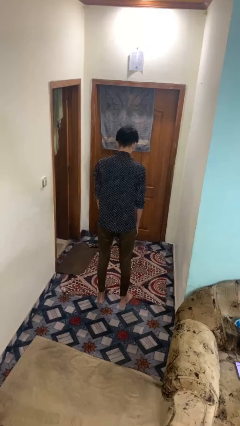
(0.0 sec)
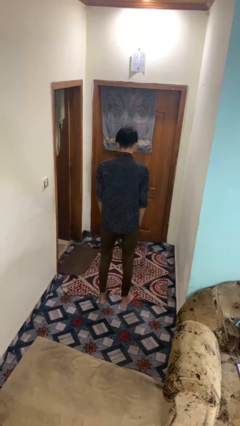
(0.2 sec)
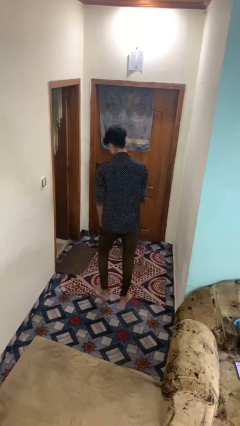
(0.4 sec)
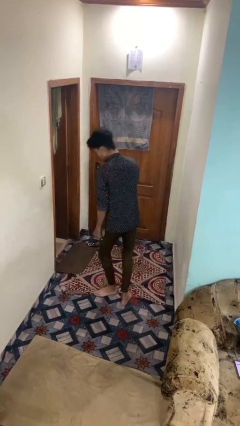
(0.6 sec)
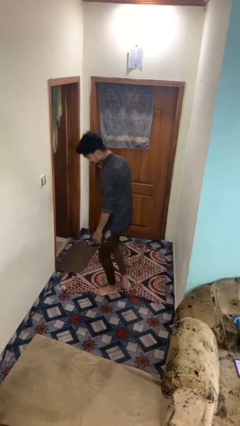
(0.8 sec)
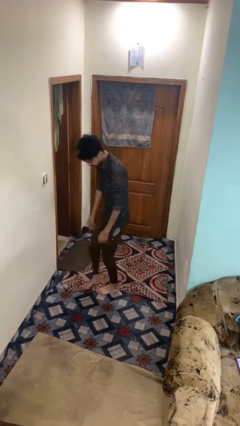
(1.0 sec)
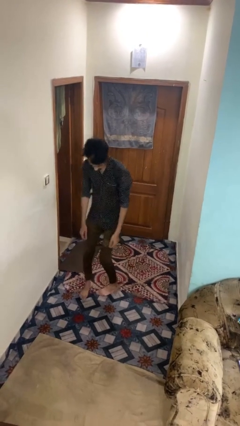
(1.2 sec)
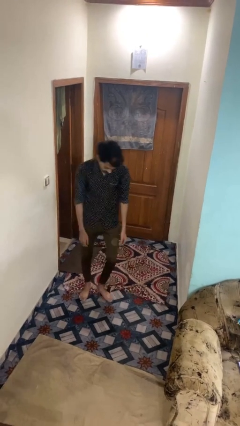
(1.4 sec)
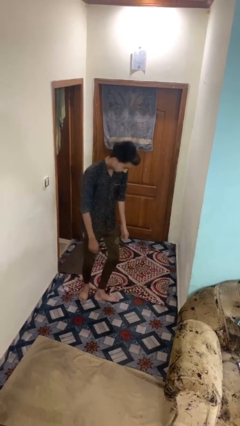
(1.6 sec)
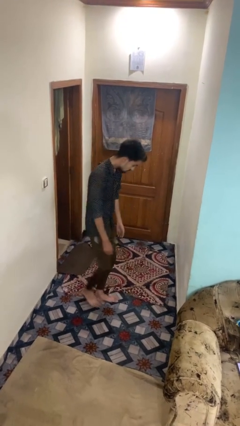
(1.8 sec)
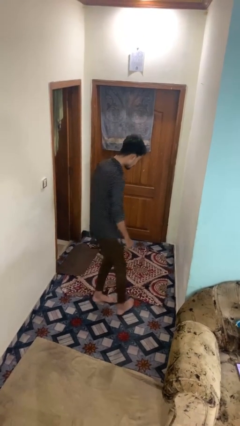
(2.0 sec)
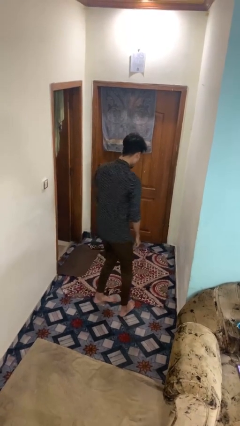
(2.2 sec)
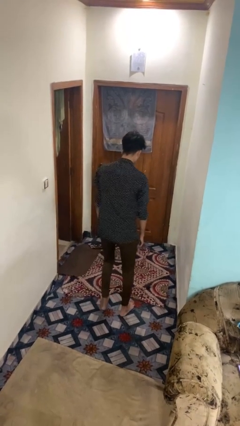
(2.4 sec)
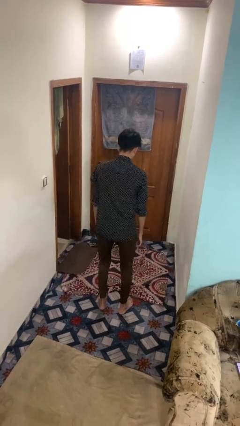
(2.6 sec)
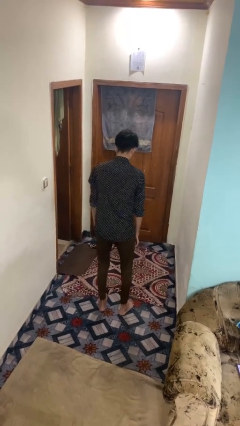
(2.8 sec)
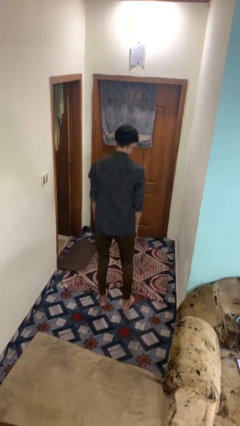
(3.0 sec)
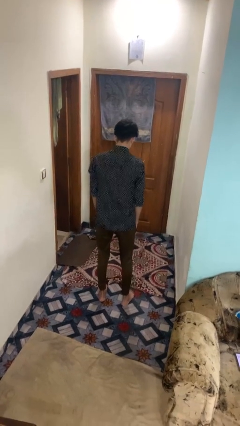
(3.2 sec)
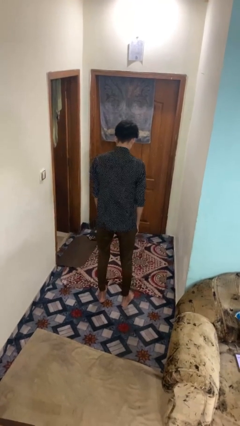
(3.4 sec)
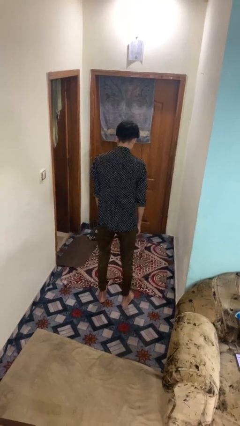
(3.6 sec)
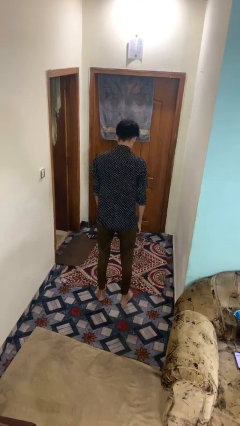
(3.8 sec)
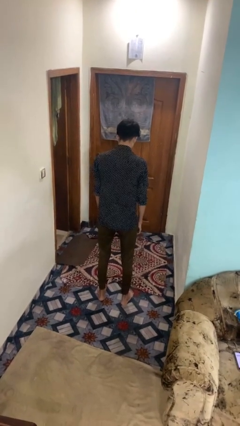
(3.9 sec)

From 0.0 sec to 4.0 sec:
person twirls

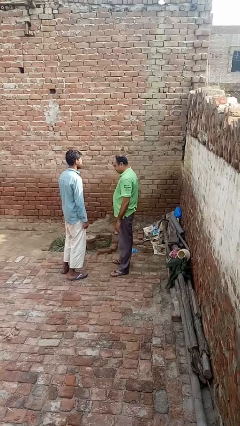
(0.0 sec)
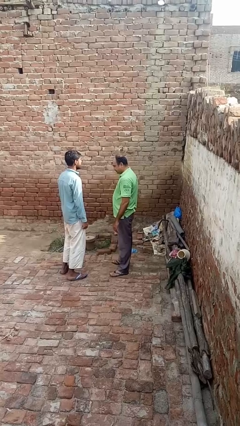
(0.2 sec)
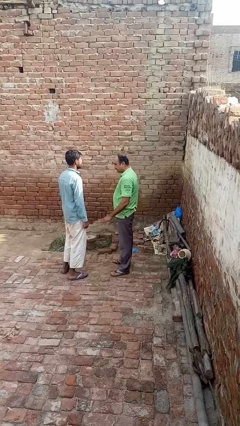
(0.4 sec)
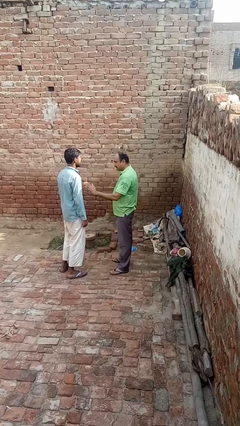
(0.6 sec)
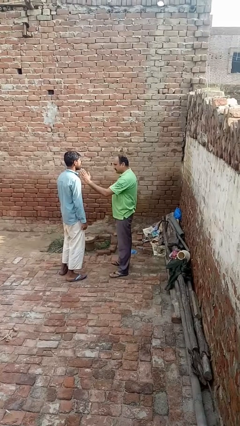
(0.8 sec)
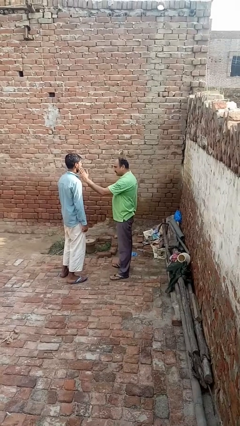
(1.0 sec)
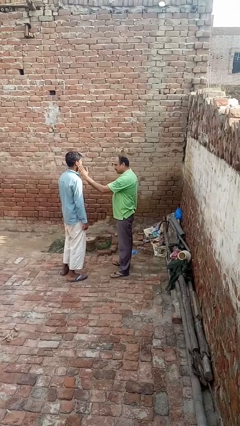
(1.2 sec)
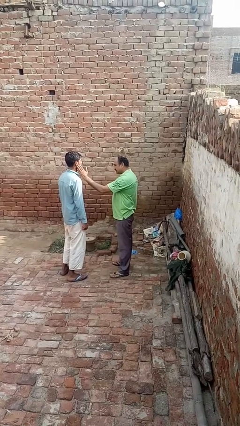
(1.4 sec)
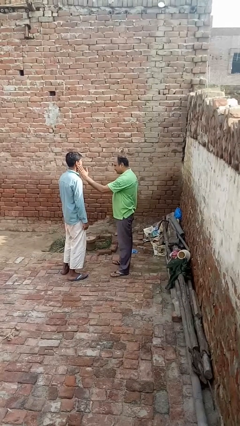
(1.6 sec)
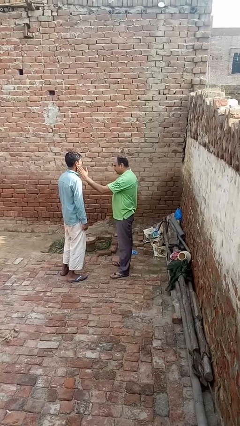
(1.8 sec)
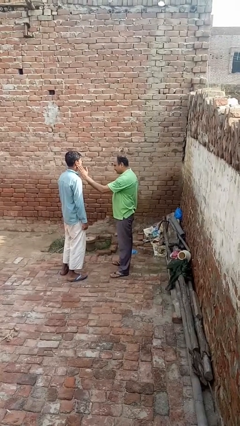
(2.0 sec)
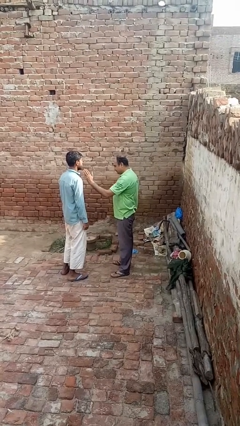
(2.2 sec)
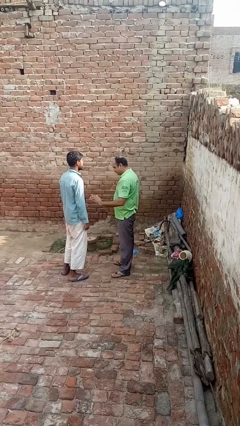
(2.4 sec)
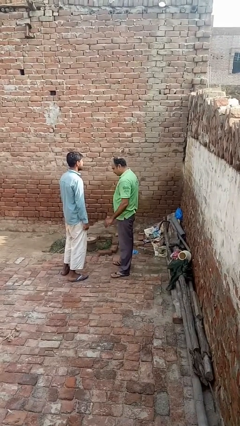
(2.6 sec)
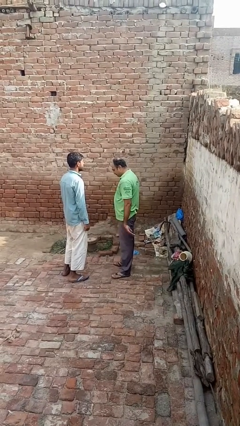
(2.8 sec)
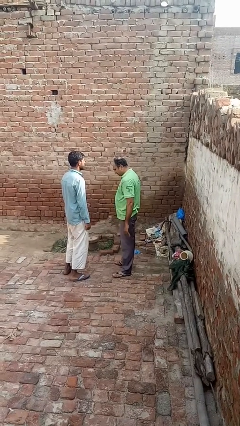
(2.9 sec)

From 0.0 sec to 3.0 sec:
person touches face of person

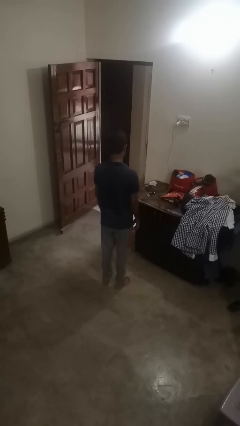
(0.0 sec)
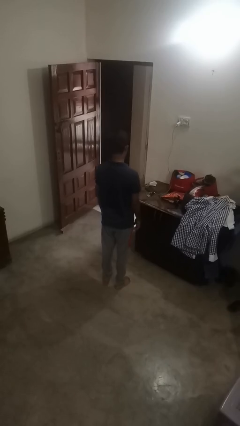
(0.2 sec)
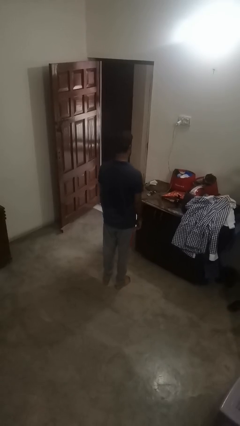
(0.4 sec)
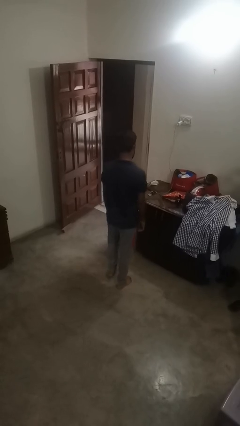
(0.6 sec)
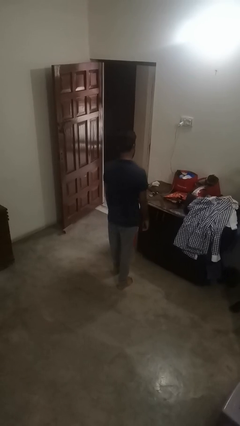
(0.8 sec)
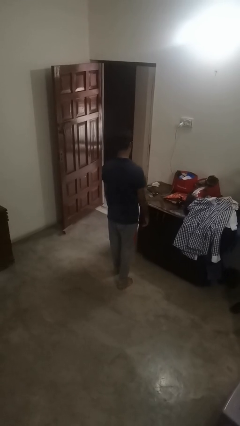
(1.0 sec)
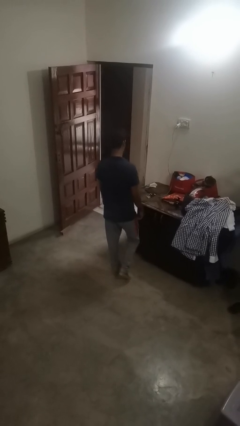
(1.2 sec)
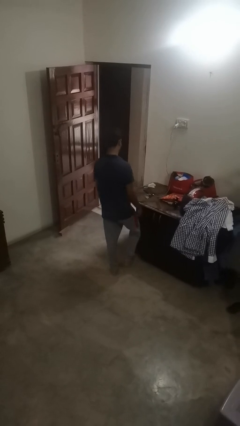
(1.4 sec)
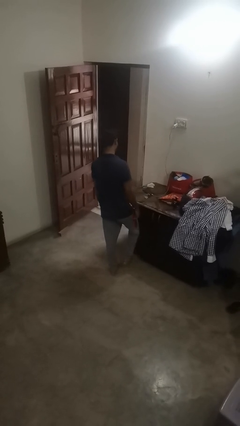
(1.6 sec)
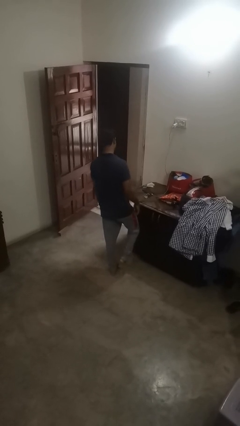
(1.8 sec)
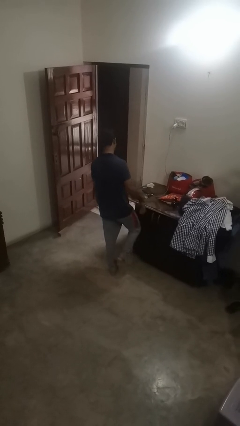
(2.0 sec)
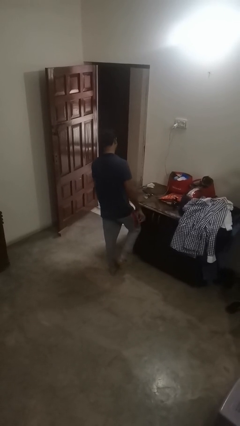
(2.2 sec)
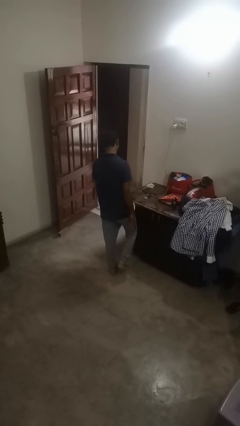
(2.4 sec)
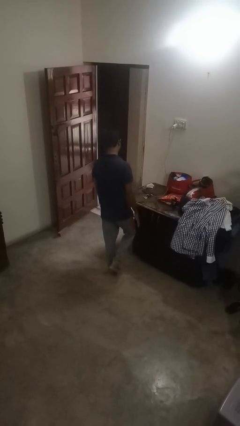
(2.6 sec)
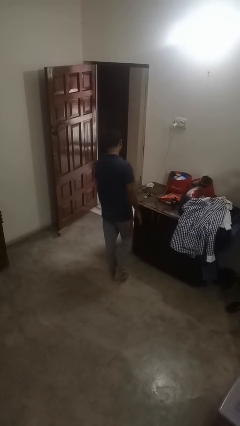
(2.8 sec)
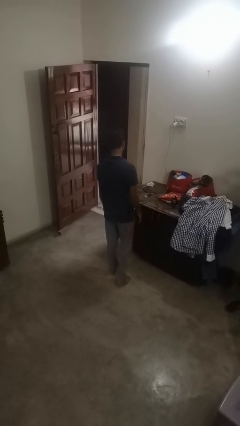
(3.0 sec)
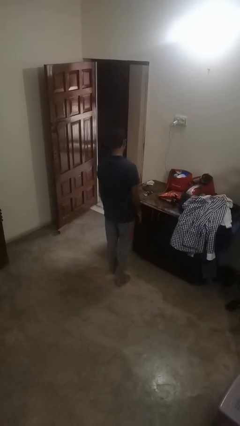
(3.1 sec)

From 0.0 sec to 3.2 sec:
person stubs toe

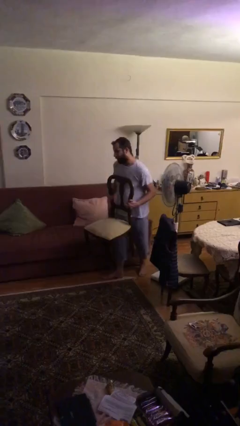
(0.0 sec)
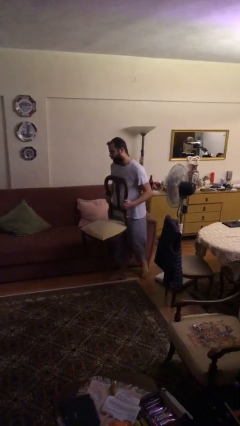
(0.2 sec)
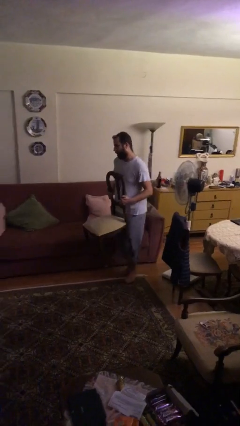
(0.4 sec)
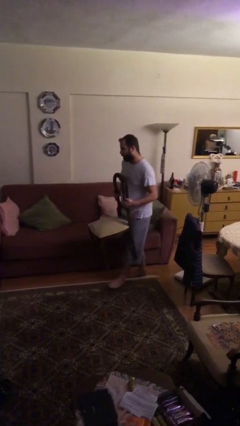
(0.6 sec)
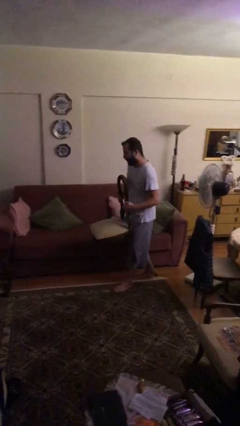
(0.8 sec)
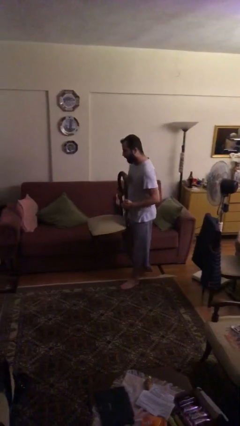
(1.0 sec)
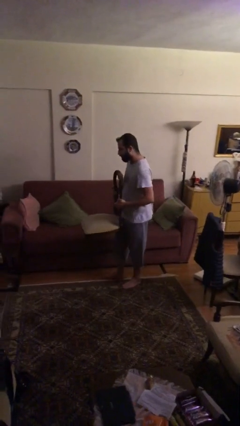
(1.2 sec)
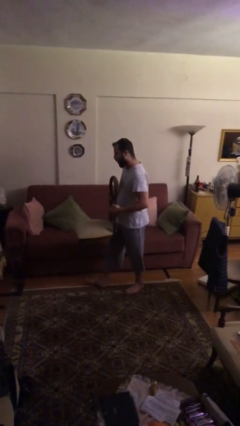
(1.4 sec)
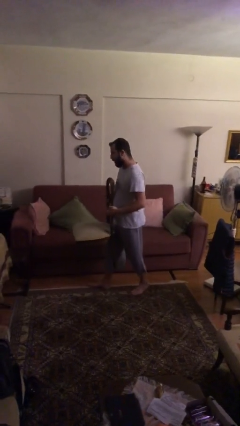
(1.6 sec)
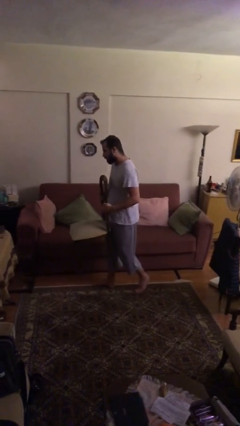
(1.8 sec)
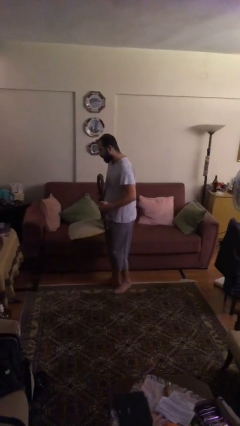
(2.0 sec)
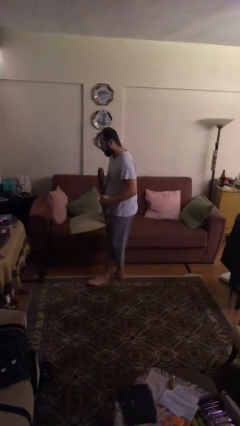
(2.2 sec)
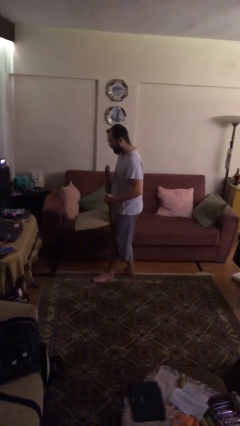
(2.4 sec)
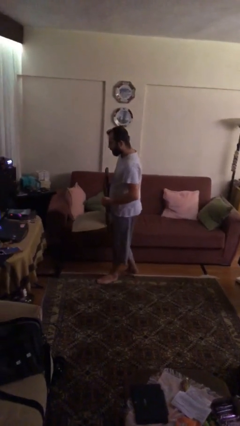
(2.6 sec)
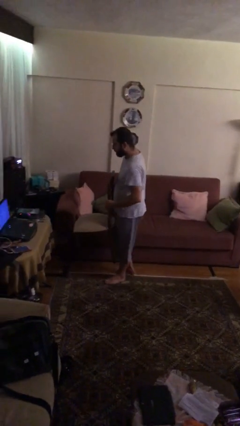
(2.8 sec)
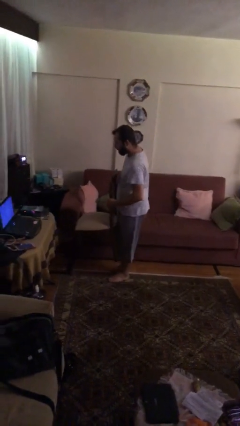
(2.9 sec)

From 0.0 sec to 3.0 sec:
person carries heavy object

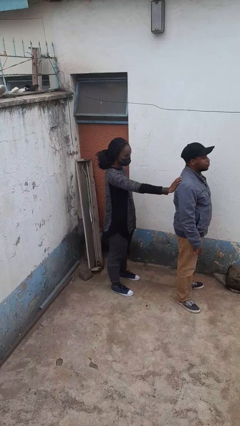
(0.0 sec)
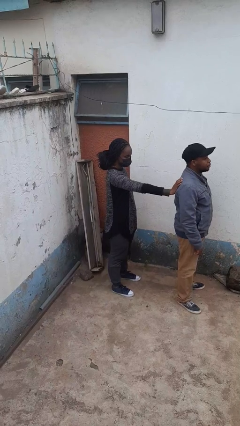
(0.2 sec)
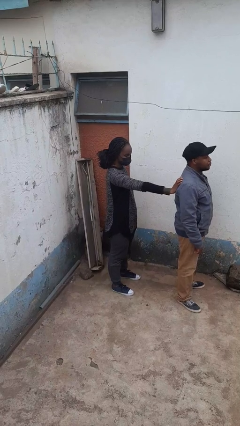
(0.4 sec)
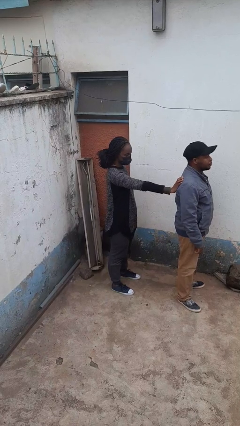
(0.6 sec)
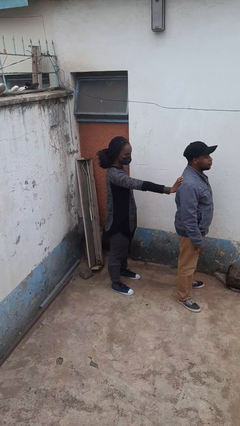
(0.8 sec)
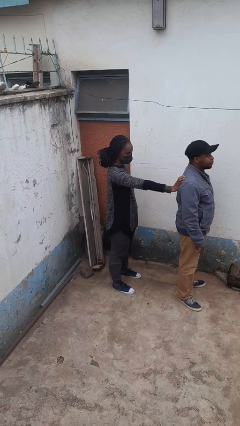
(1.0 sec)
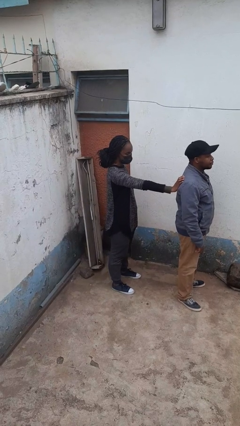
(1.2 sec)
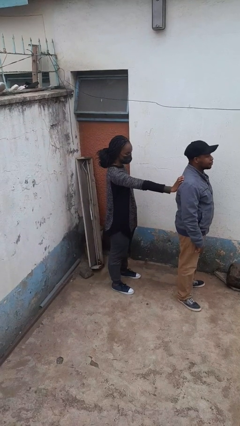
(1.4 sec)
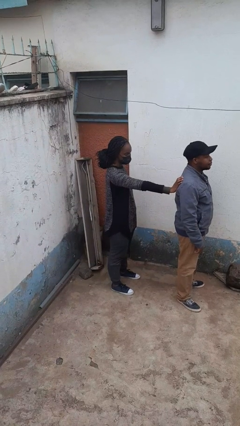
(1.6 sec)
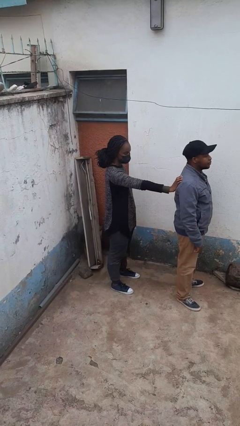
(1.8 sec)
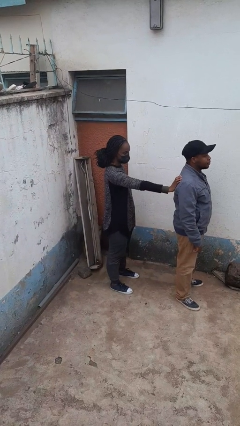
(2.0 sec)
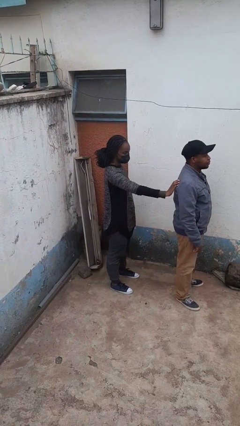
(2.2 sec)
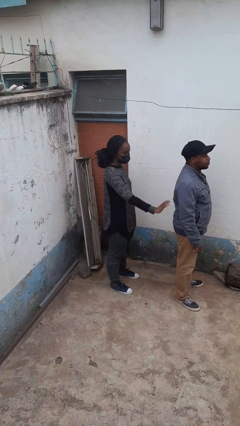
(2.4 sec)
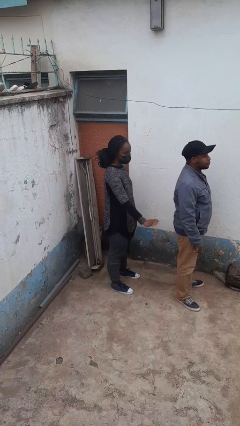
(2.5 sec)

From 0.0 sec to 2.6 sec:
person touches back of person

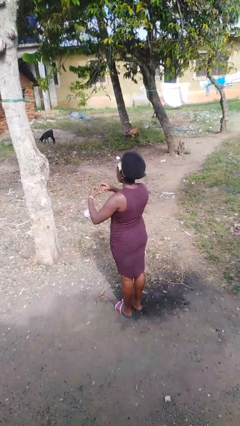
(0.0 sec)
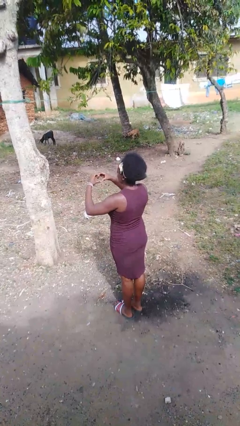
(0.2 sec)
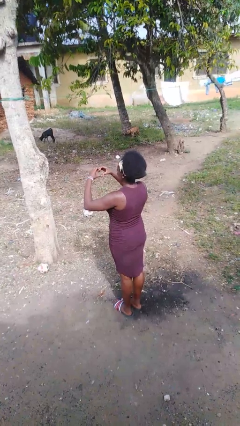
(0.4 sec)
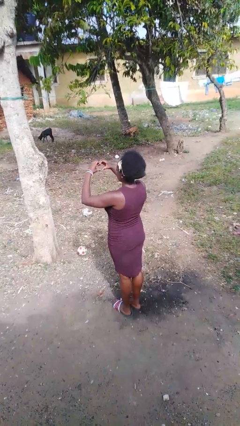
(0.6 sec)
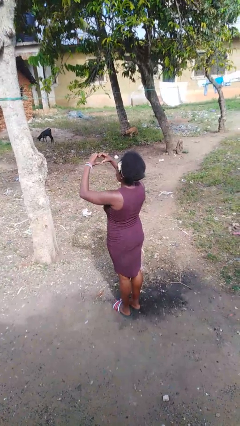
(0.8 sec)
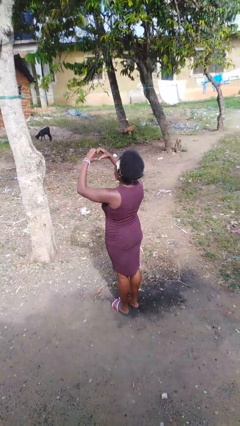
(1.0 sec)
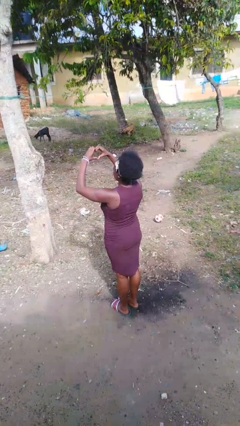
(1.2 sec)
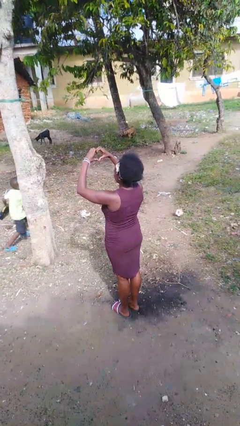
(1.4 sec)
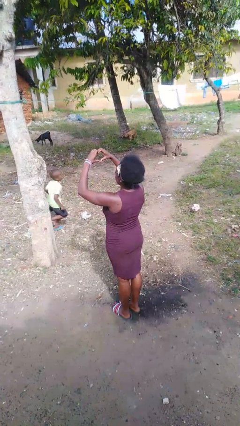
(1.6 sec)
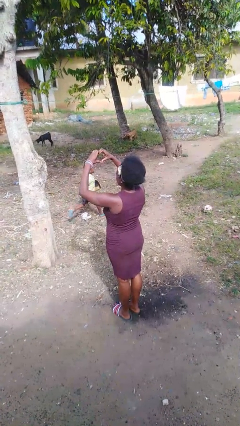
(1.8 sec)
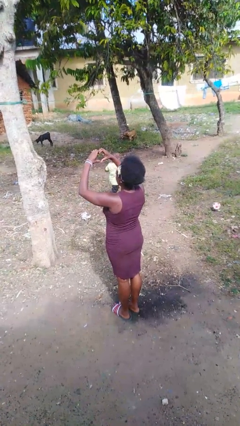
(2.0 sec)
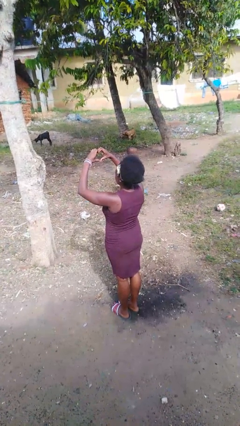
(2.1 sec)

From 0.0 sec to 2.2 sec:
person gestures heart
